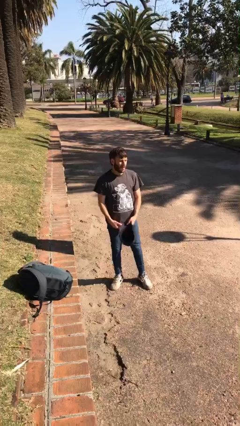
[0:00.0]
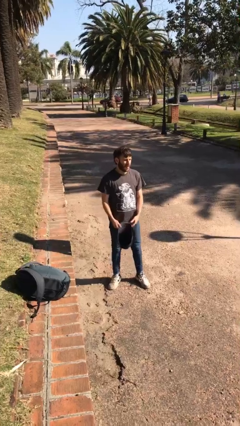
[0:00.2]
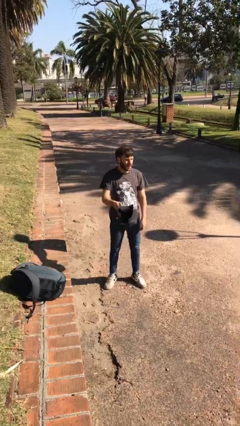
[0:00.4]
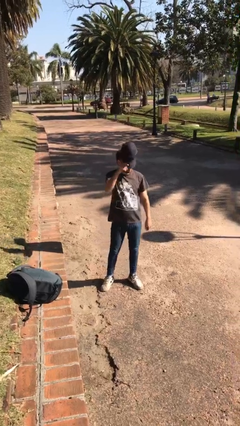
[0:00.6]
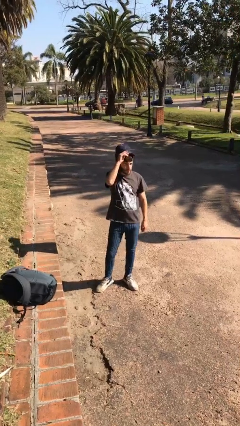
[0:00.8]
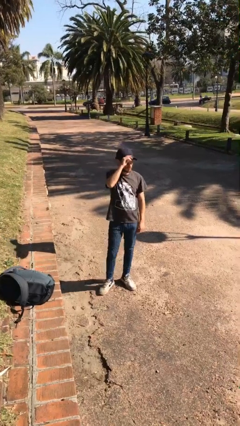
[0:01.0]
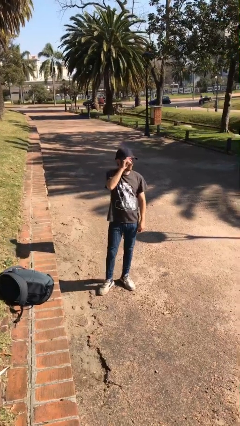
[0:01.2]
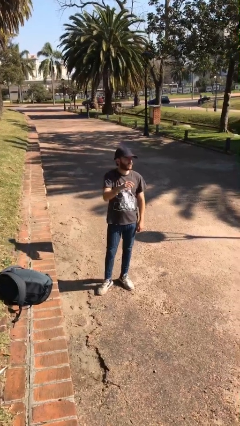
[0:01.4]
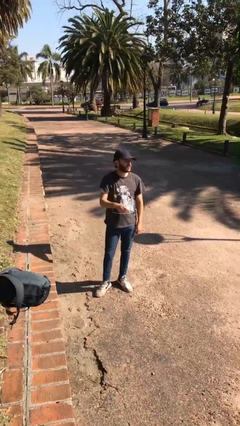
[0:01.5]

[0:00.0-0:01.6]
person puts on hat

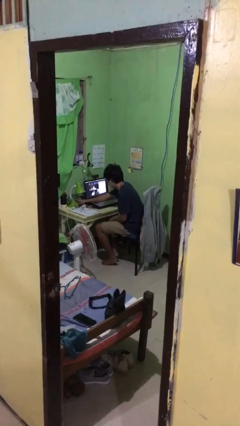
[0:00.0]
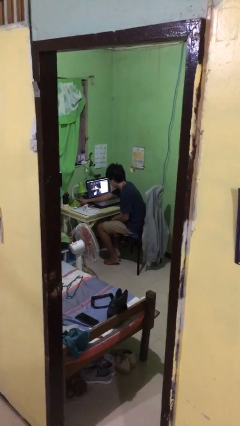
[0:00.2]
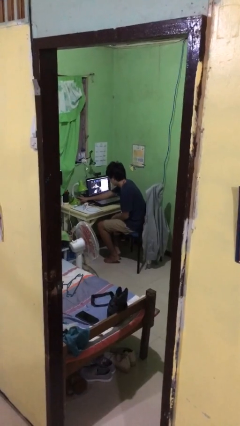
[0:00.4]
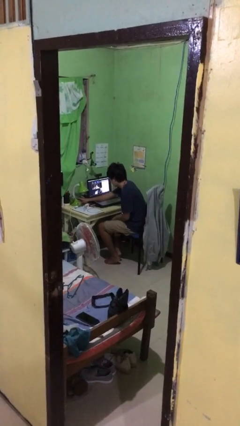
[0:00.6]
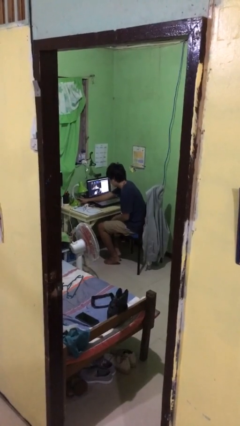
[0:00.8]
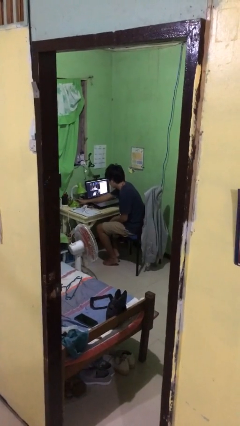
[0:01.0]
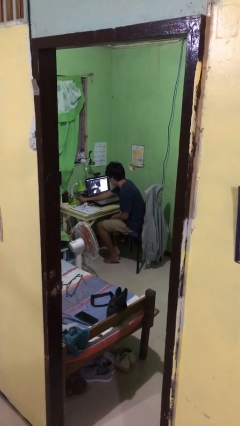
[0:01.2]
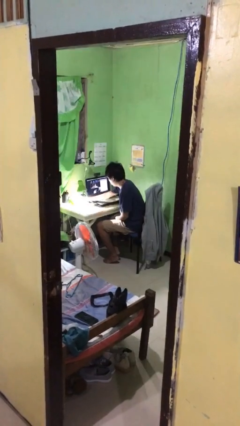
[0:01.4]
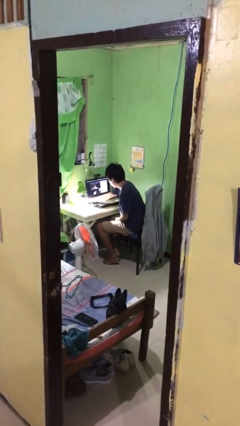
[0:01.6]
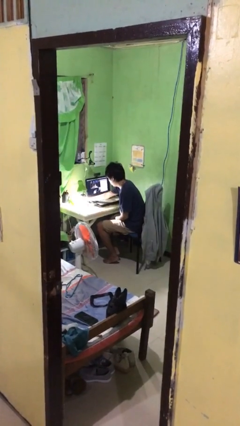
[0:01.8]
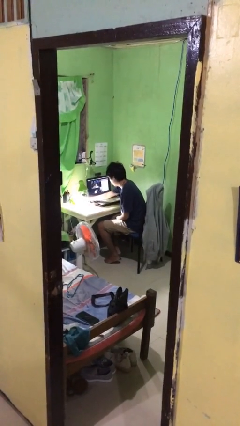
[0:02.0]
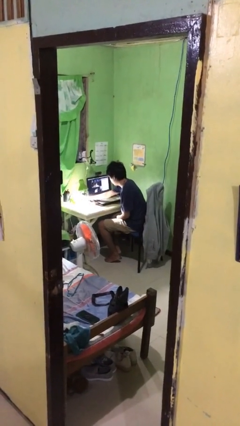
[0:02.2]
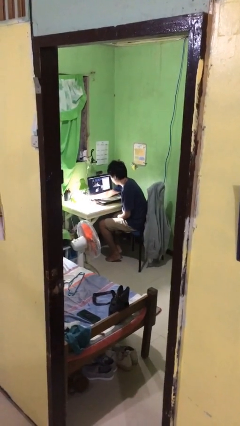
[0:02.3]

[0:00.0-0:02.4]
person turns on lamp

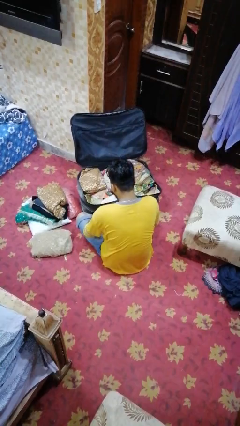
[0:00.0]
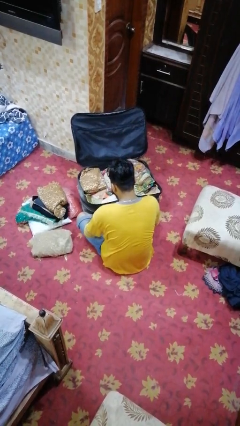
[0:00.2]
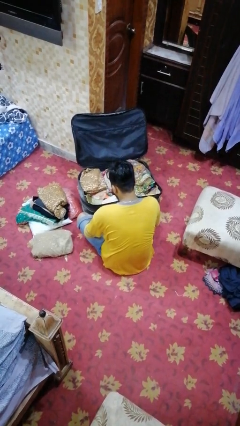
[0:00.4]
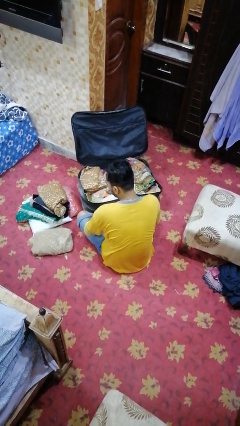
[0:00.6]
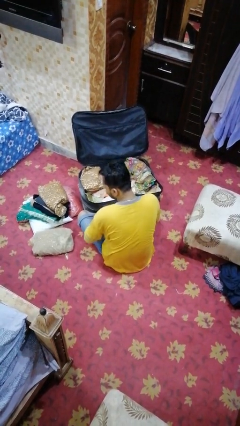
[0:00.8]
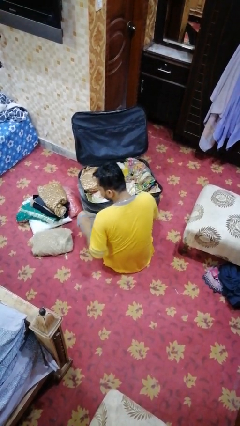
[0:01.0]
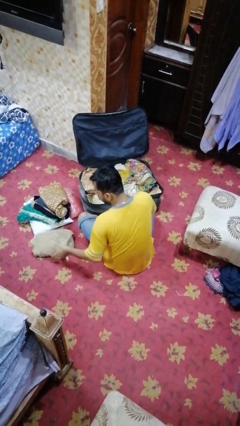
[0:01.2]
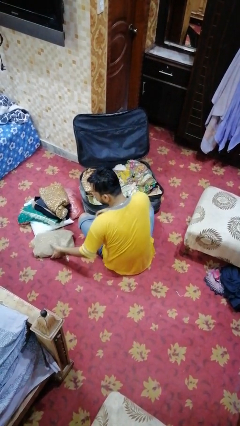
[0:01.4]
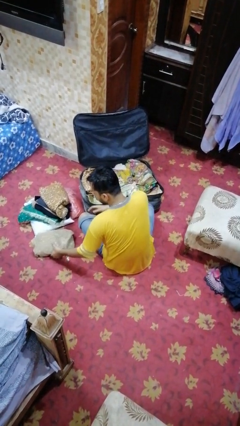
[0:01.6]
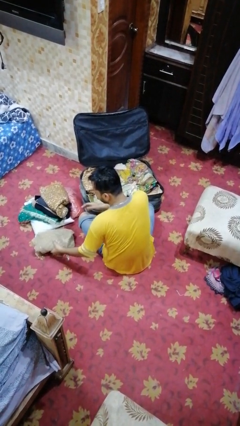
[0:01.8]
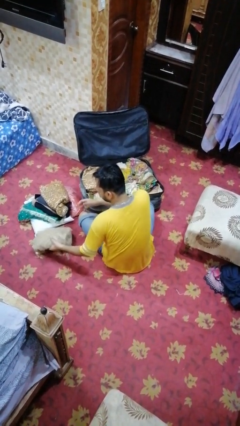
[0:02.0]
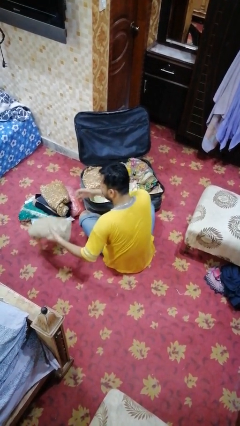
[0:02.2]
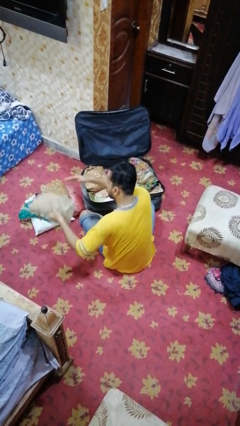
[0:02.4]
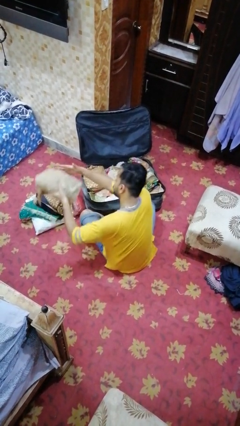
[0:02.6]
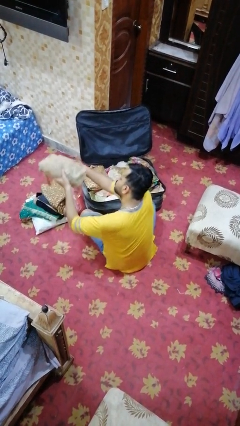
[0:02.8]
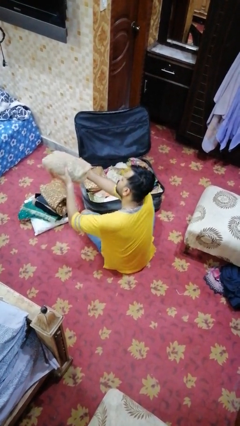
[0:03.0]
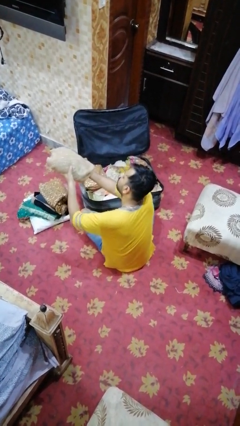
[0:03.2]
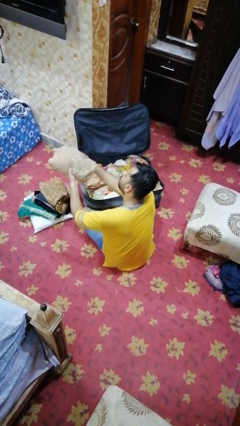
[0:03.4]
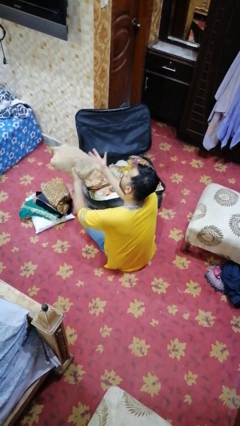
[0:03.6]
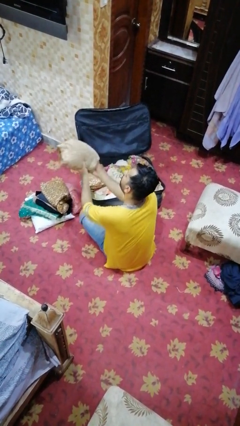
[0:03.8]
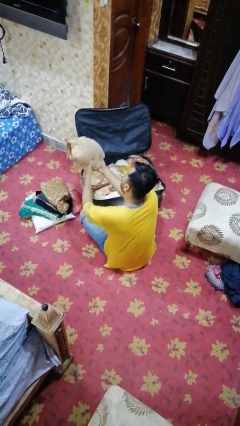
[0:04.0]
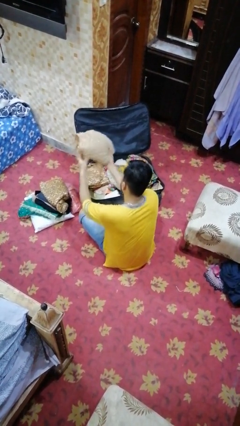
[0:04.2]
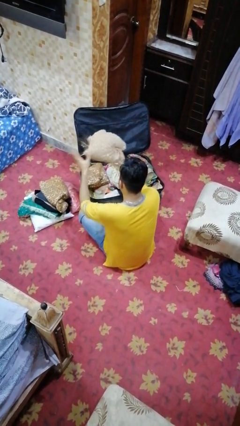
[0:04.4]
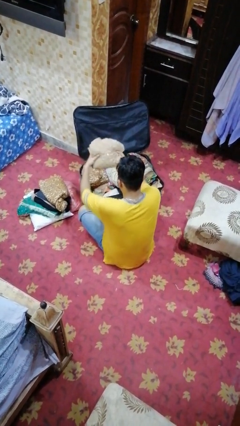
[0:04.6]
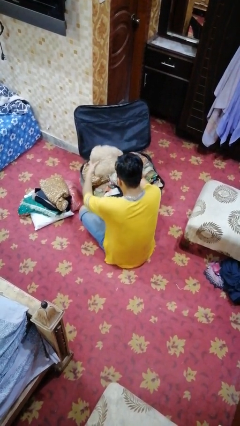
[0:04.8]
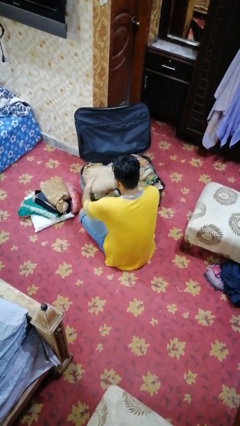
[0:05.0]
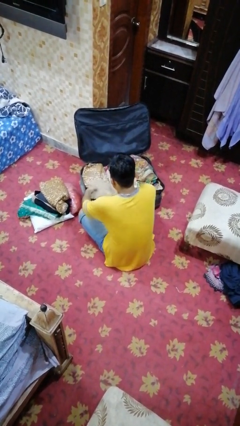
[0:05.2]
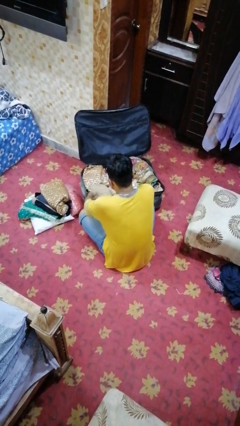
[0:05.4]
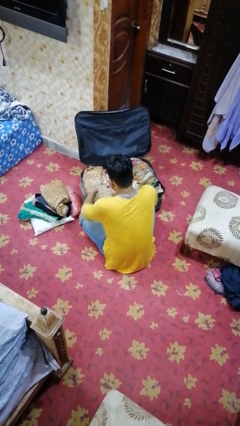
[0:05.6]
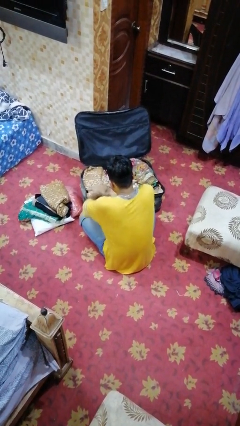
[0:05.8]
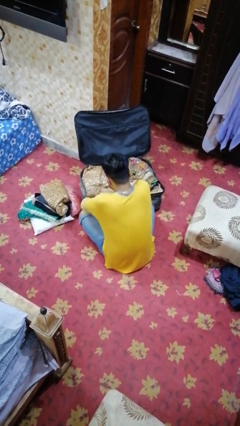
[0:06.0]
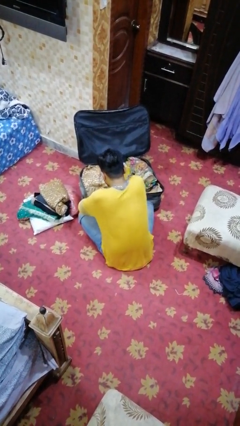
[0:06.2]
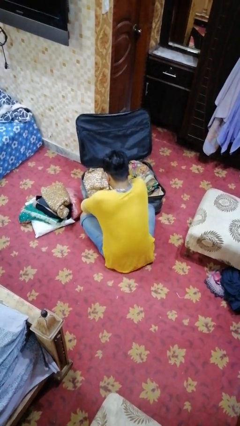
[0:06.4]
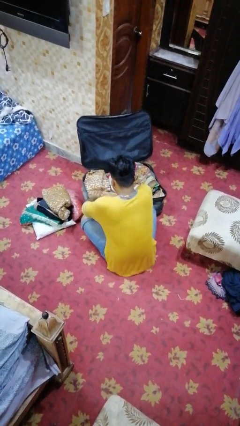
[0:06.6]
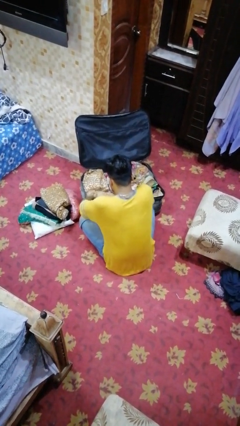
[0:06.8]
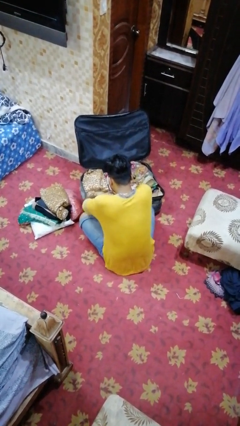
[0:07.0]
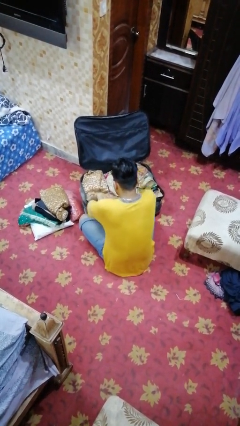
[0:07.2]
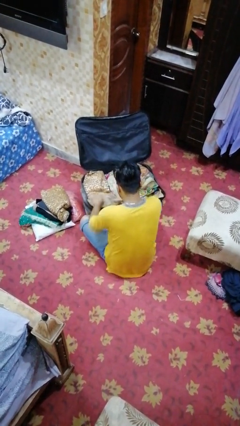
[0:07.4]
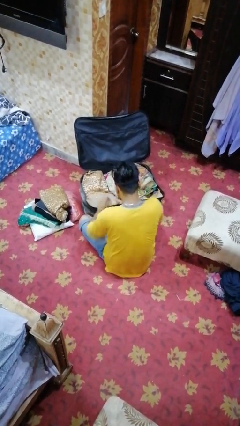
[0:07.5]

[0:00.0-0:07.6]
person loads clothes into suitcase

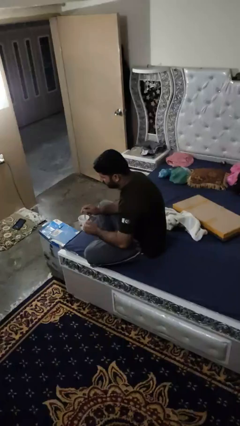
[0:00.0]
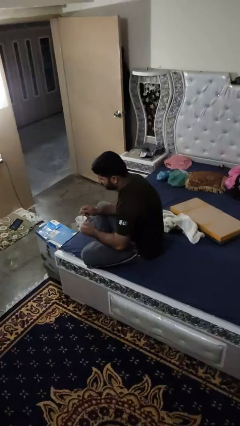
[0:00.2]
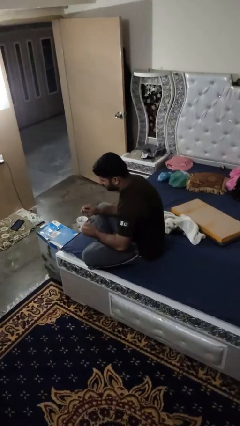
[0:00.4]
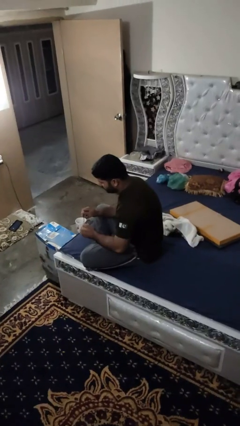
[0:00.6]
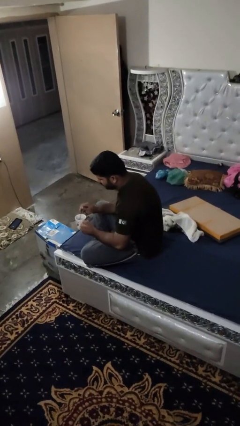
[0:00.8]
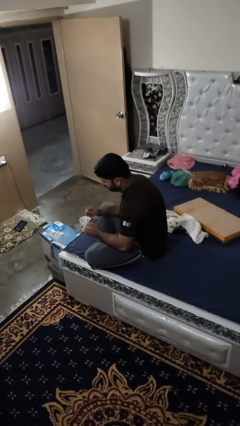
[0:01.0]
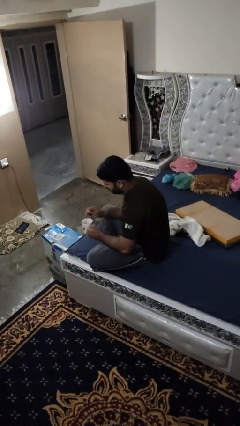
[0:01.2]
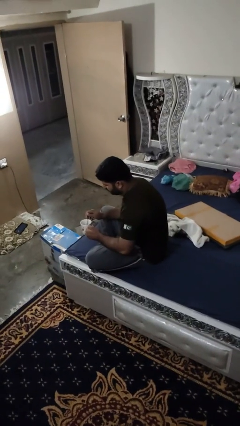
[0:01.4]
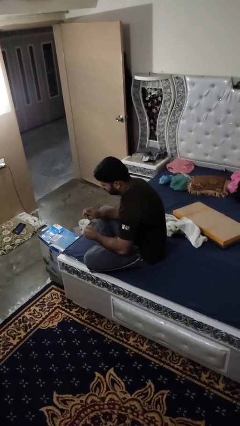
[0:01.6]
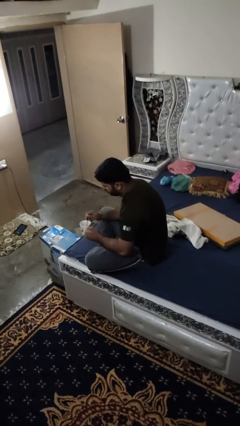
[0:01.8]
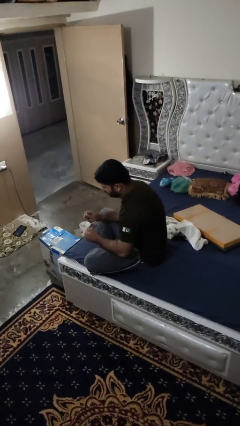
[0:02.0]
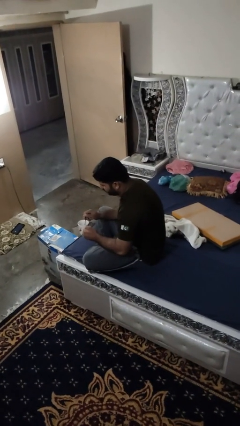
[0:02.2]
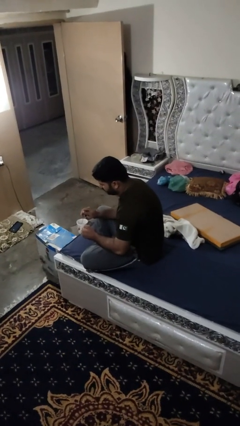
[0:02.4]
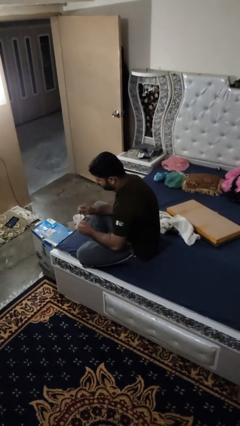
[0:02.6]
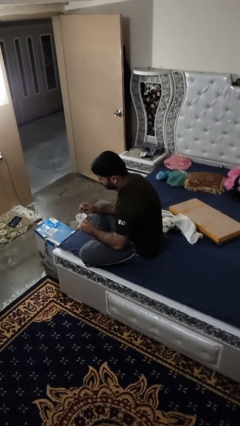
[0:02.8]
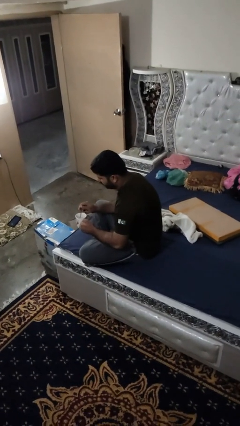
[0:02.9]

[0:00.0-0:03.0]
person stirs mug

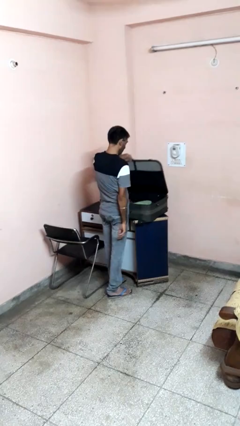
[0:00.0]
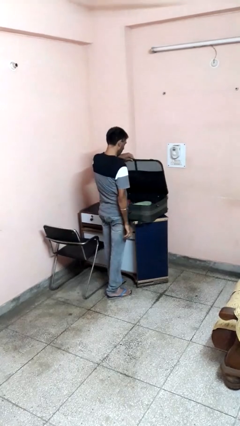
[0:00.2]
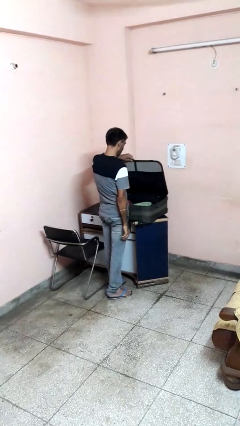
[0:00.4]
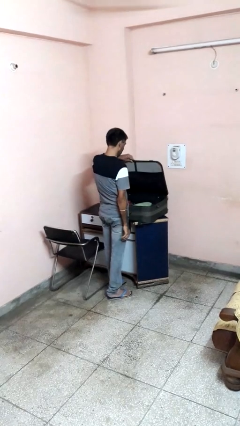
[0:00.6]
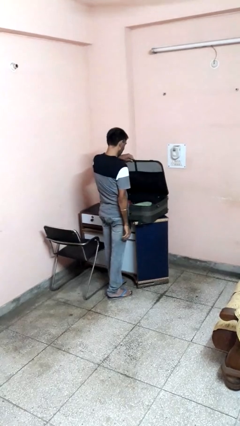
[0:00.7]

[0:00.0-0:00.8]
person opens suitcase

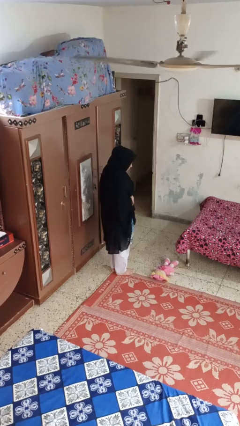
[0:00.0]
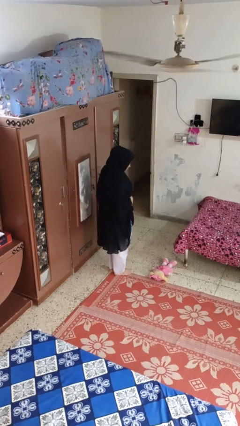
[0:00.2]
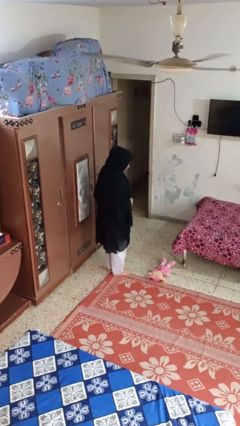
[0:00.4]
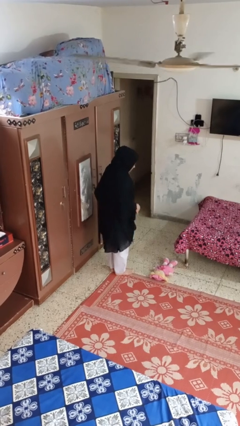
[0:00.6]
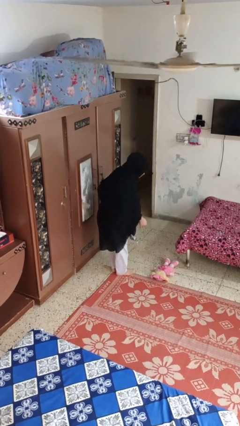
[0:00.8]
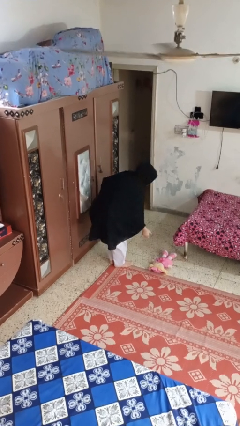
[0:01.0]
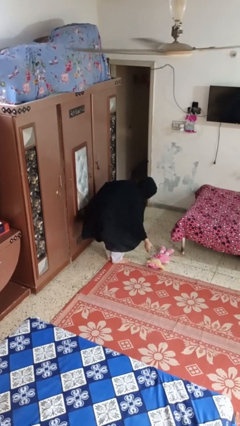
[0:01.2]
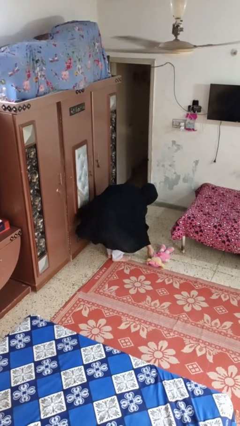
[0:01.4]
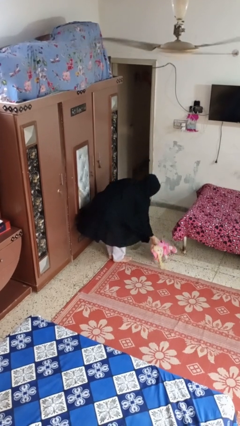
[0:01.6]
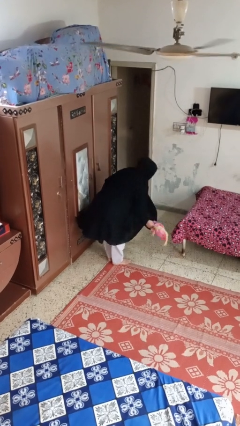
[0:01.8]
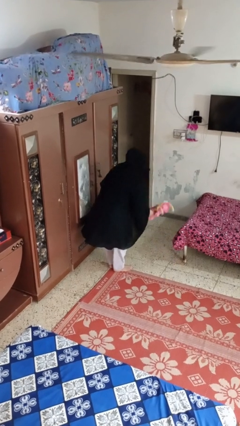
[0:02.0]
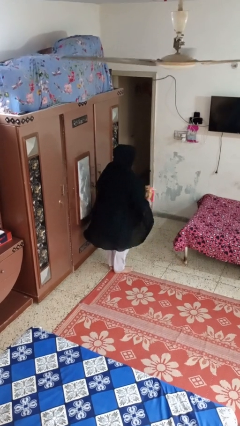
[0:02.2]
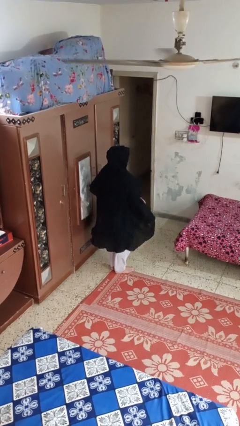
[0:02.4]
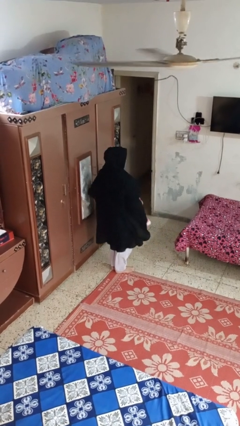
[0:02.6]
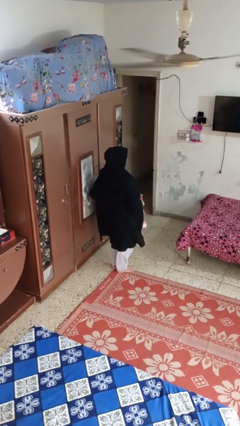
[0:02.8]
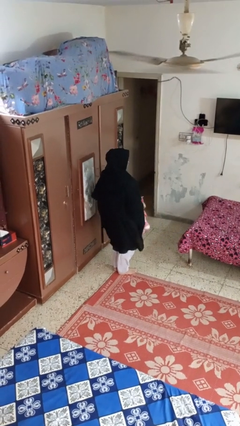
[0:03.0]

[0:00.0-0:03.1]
person picks up object from floor
